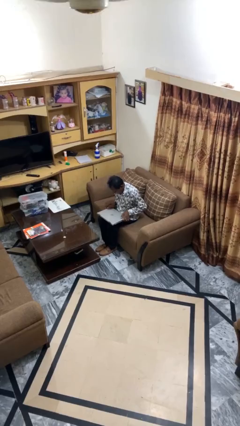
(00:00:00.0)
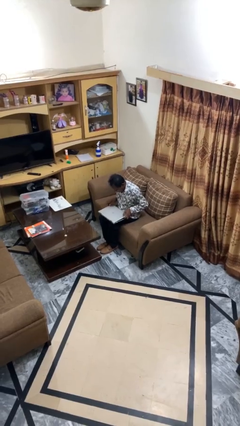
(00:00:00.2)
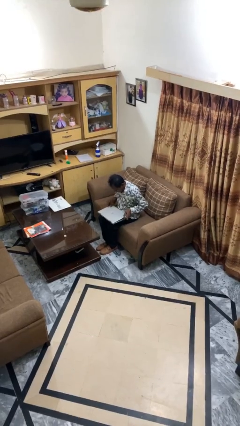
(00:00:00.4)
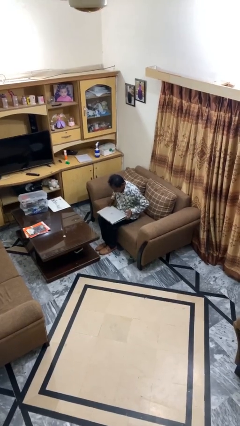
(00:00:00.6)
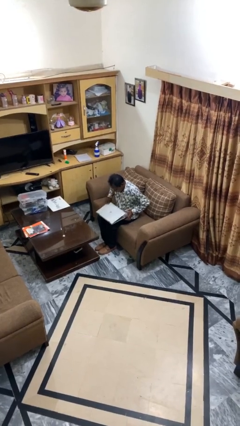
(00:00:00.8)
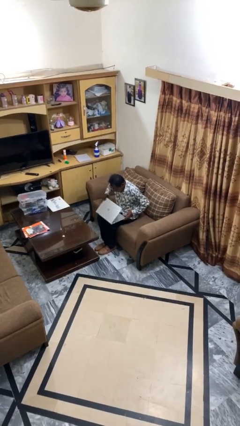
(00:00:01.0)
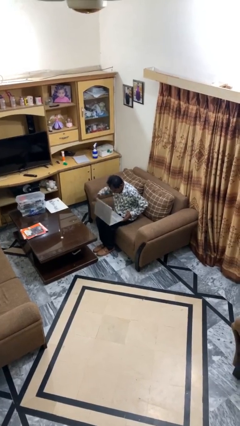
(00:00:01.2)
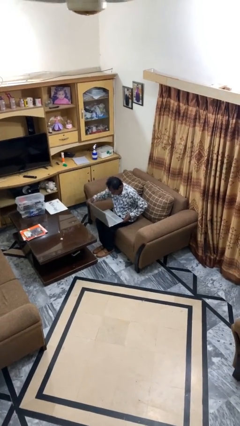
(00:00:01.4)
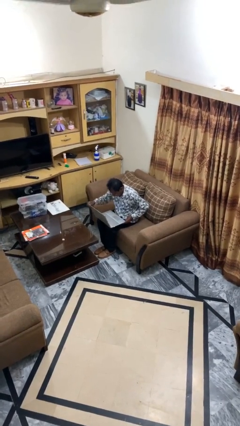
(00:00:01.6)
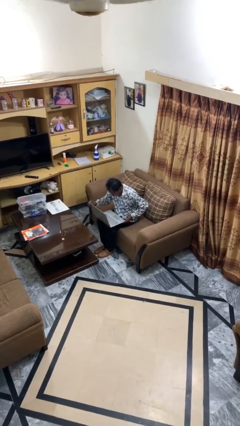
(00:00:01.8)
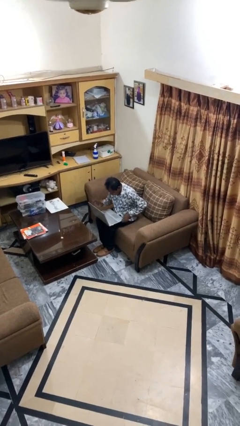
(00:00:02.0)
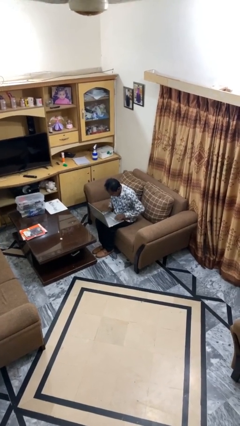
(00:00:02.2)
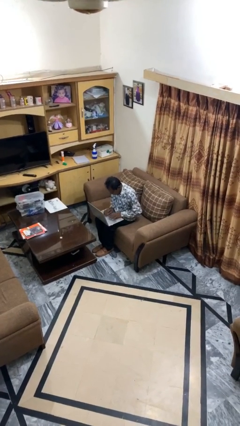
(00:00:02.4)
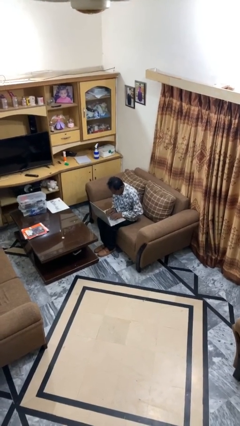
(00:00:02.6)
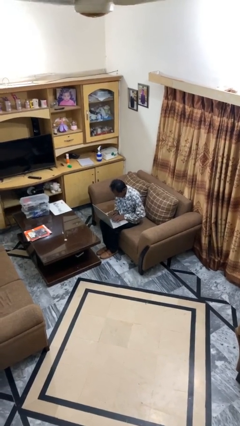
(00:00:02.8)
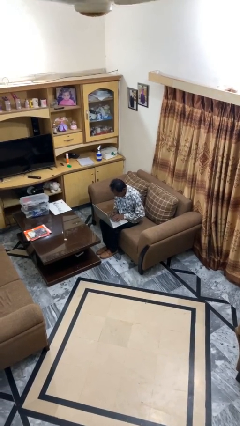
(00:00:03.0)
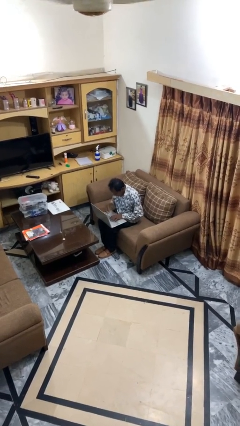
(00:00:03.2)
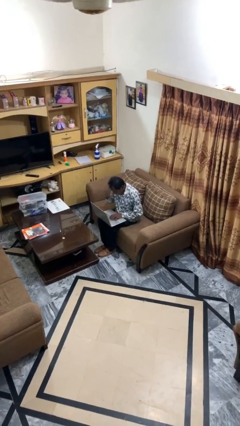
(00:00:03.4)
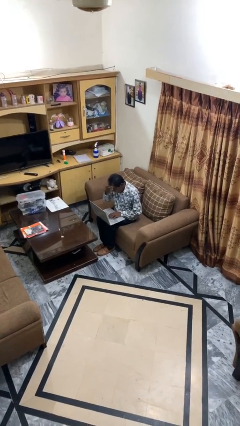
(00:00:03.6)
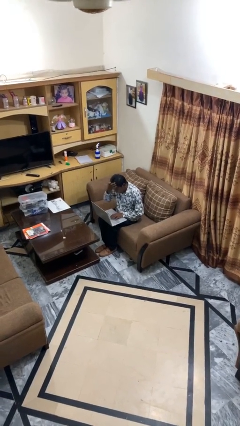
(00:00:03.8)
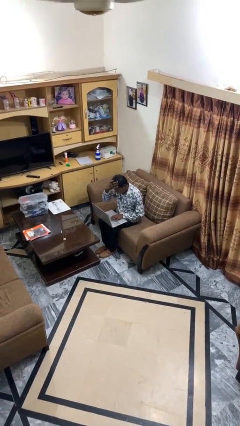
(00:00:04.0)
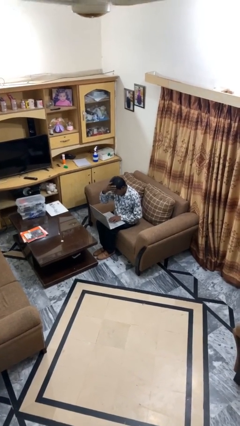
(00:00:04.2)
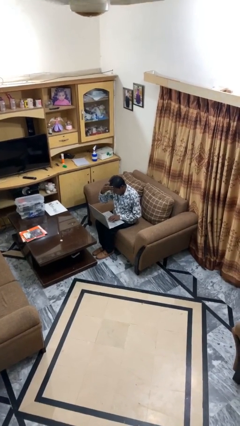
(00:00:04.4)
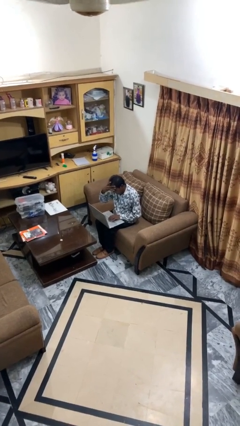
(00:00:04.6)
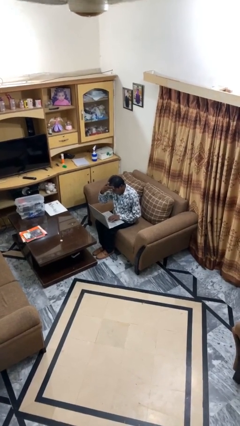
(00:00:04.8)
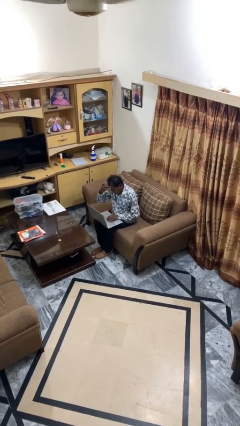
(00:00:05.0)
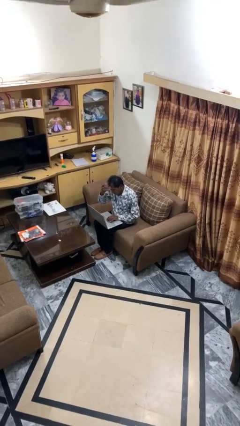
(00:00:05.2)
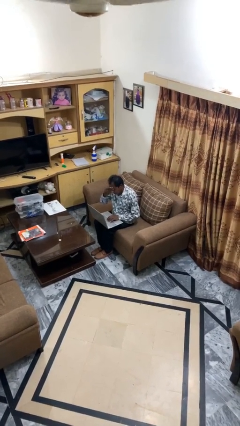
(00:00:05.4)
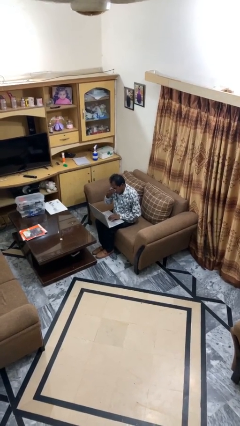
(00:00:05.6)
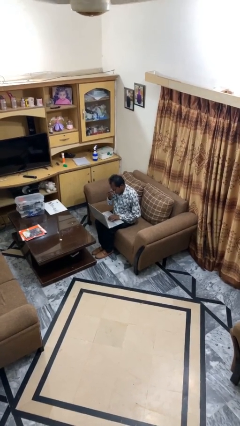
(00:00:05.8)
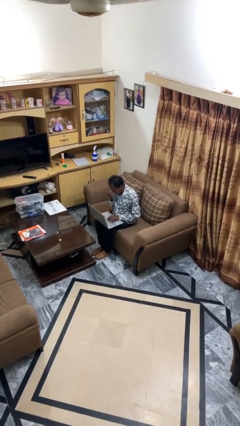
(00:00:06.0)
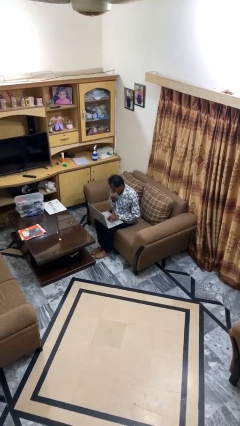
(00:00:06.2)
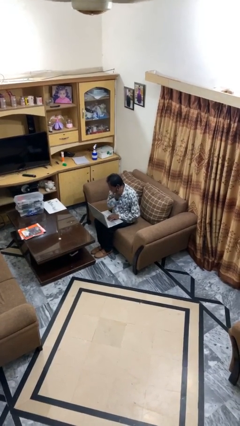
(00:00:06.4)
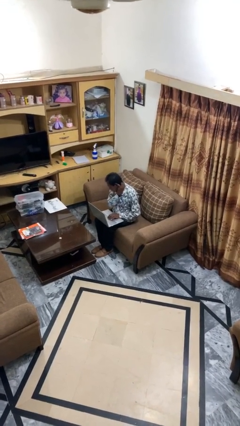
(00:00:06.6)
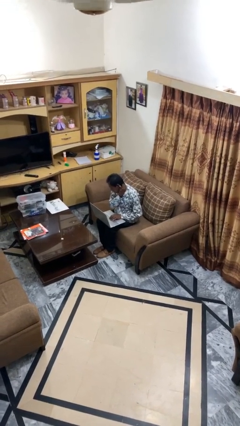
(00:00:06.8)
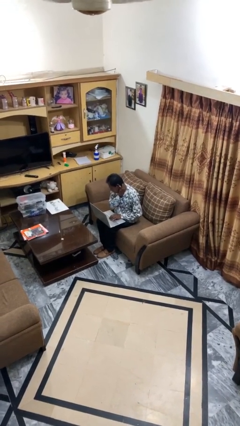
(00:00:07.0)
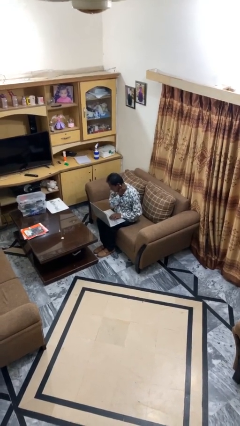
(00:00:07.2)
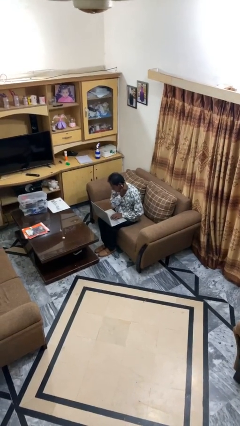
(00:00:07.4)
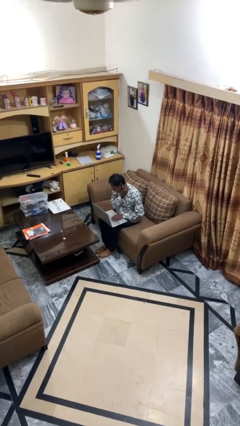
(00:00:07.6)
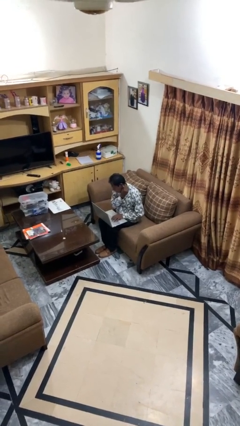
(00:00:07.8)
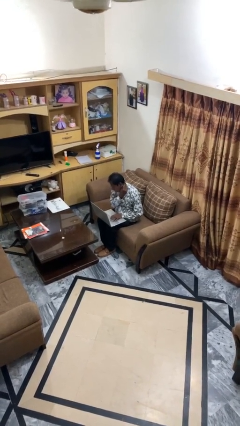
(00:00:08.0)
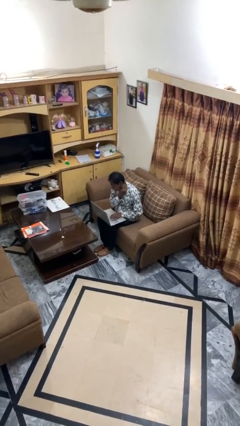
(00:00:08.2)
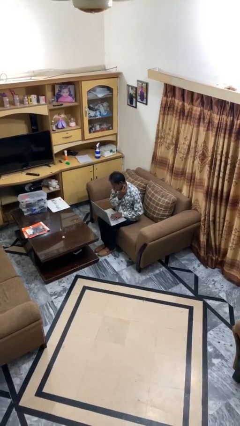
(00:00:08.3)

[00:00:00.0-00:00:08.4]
person interacts with laptop

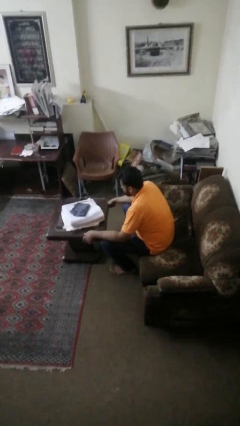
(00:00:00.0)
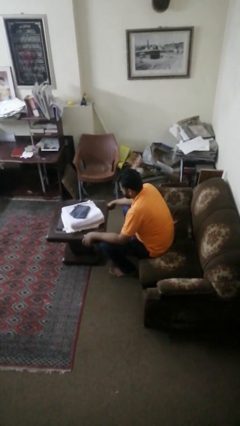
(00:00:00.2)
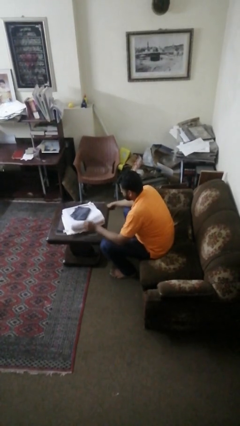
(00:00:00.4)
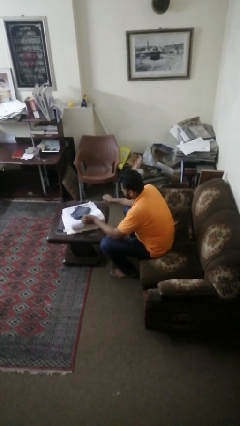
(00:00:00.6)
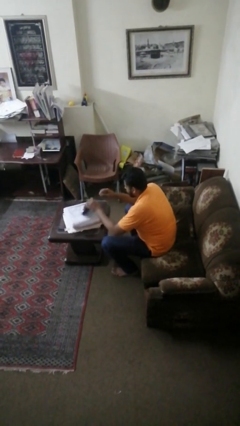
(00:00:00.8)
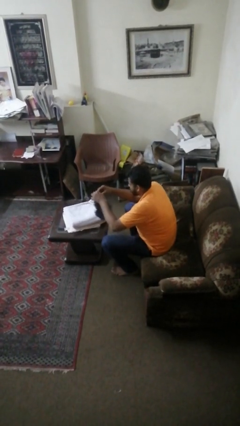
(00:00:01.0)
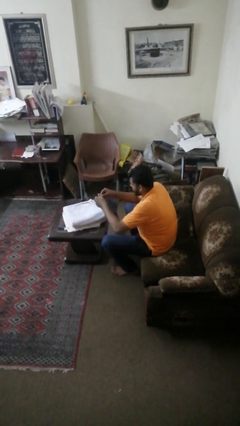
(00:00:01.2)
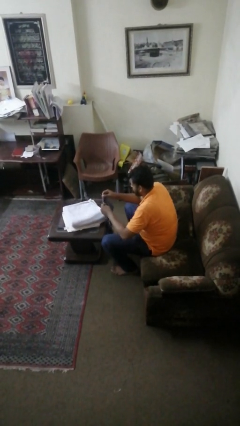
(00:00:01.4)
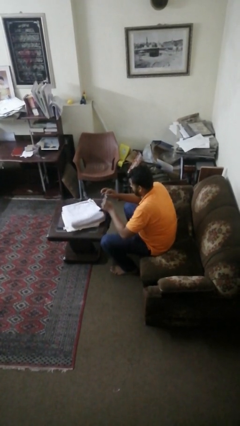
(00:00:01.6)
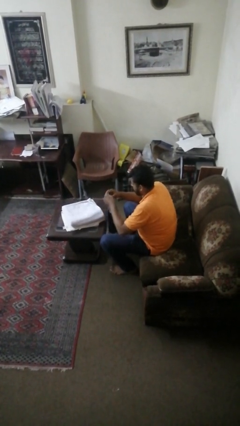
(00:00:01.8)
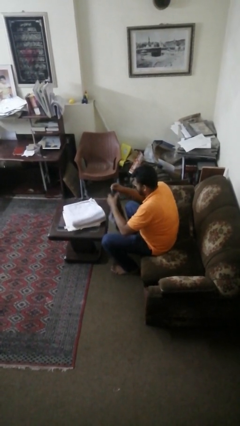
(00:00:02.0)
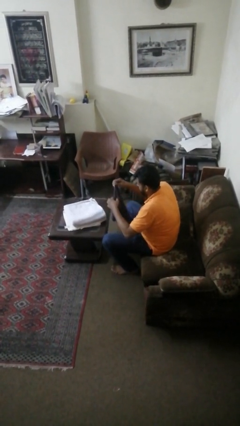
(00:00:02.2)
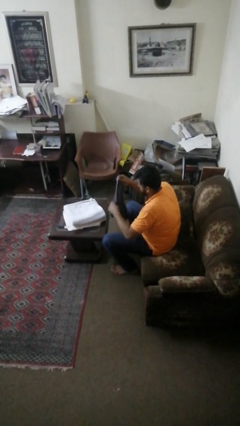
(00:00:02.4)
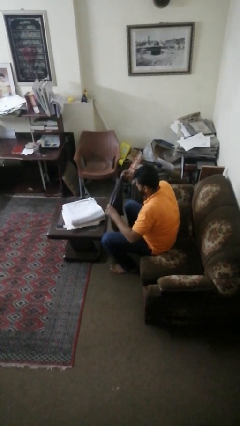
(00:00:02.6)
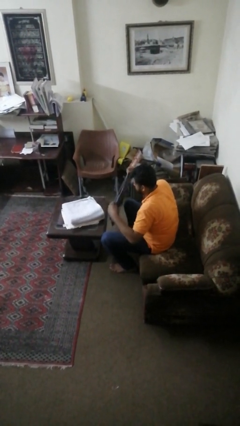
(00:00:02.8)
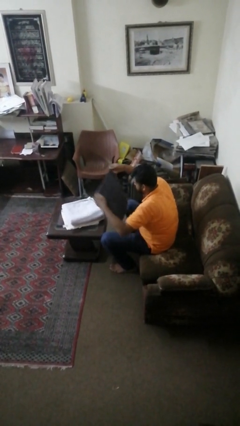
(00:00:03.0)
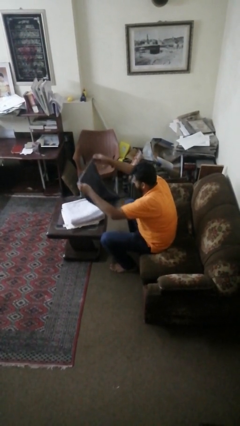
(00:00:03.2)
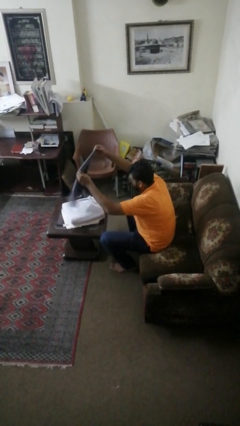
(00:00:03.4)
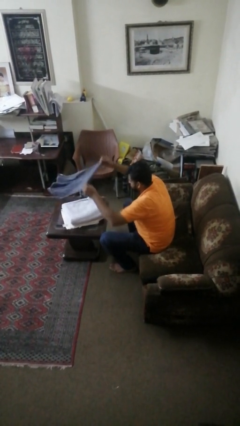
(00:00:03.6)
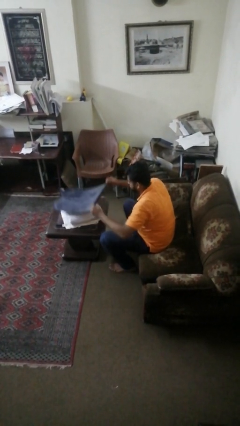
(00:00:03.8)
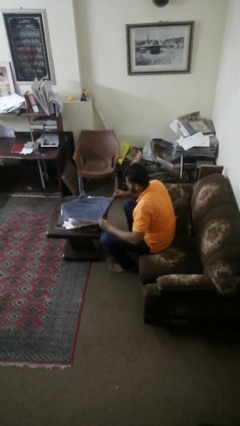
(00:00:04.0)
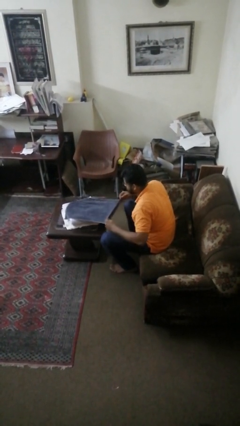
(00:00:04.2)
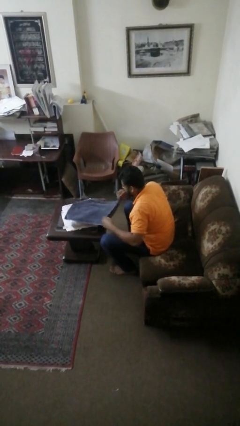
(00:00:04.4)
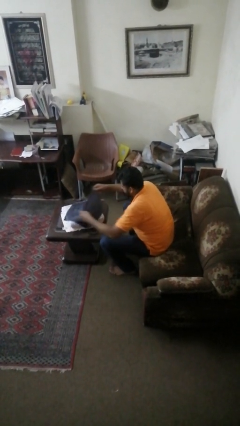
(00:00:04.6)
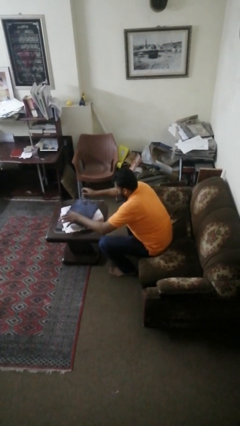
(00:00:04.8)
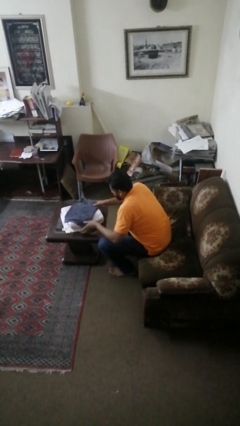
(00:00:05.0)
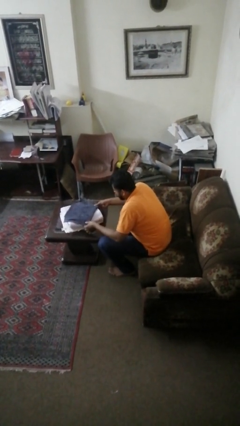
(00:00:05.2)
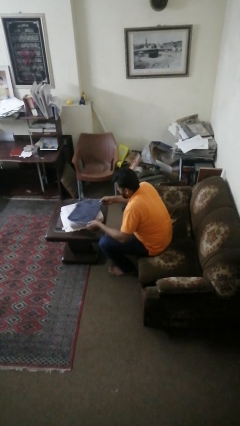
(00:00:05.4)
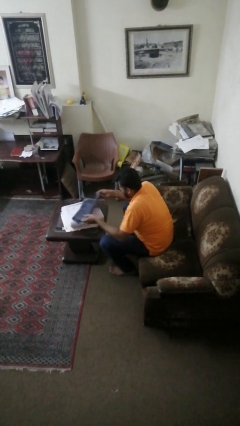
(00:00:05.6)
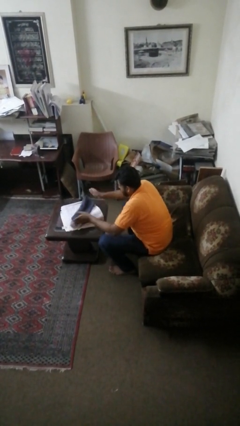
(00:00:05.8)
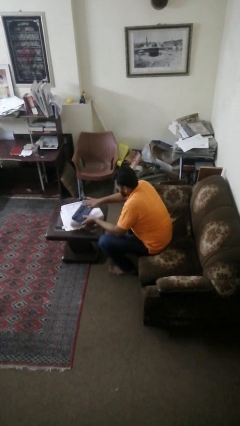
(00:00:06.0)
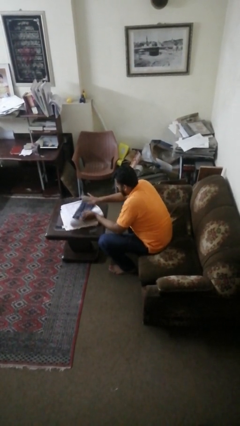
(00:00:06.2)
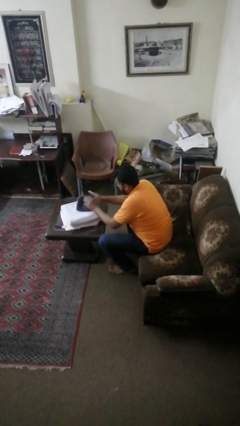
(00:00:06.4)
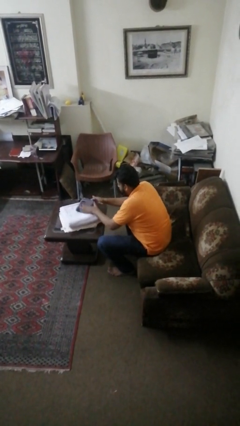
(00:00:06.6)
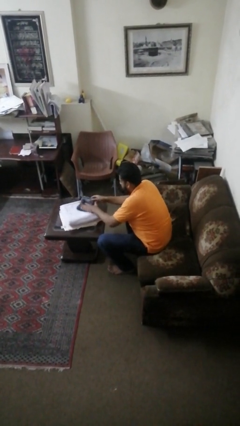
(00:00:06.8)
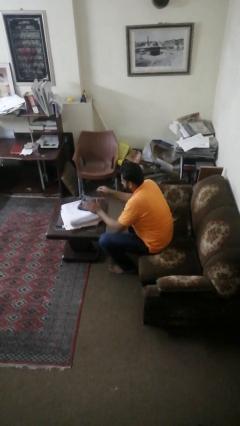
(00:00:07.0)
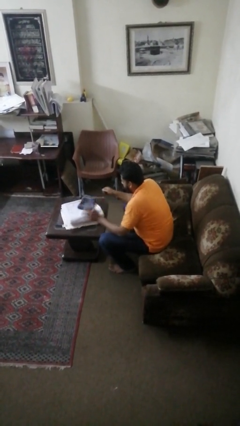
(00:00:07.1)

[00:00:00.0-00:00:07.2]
person folds towel

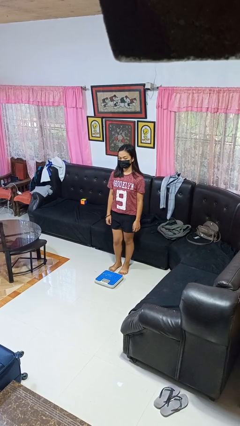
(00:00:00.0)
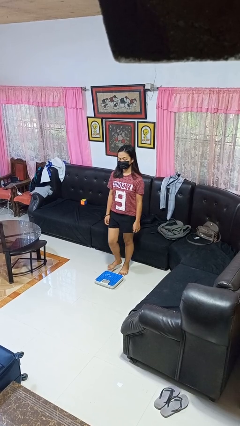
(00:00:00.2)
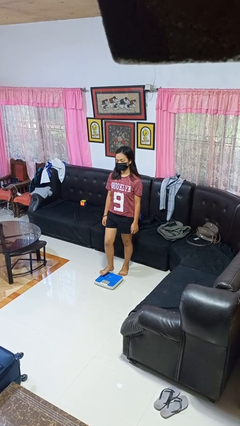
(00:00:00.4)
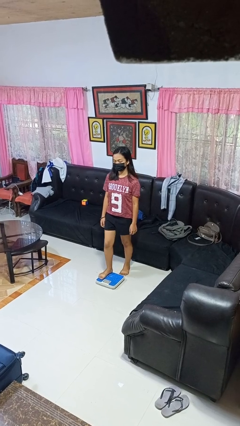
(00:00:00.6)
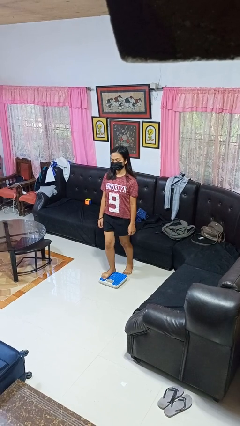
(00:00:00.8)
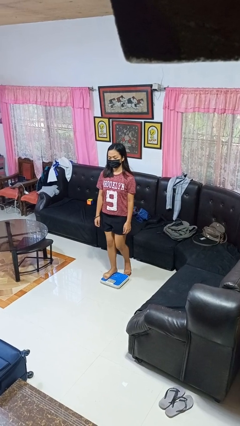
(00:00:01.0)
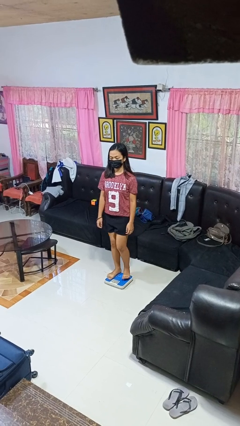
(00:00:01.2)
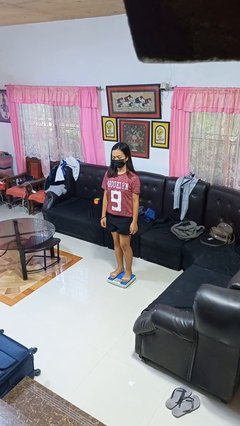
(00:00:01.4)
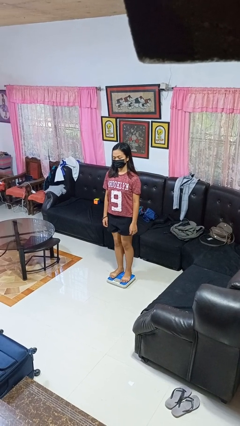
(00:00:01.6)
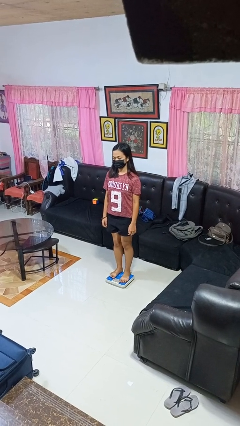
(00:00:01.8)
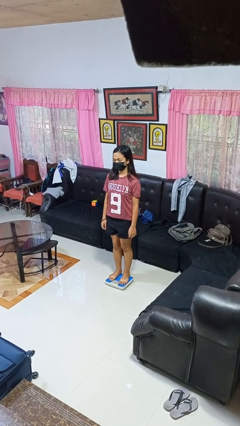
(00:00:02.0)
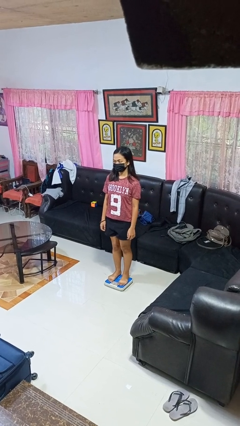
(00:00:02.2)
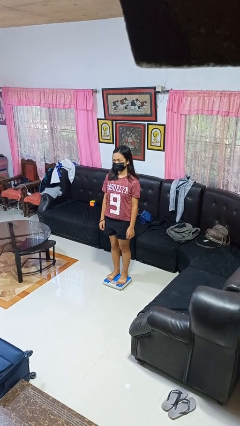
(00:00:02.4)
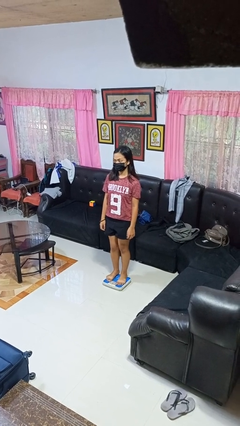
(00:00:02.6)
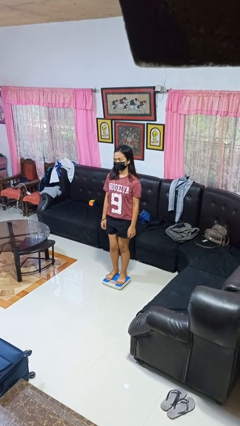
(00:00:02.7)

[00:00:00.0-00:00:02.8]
person uses bodyweight scale
